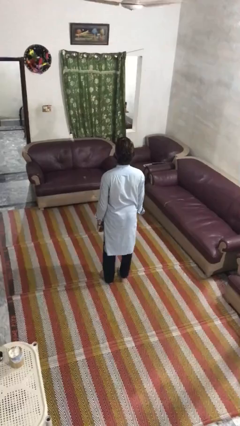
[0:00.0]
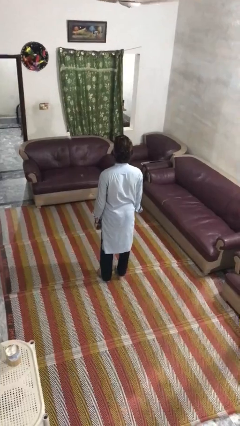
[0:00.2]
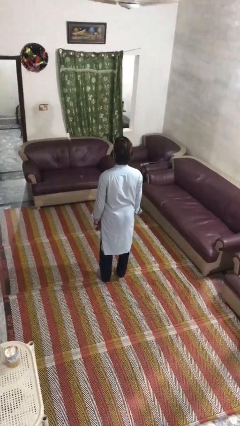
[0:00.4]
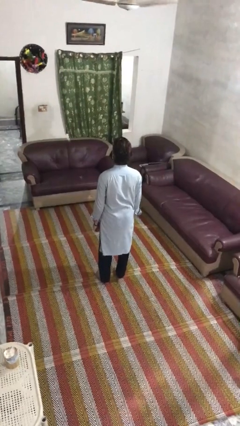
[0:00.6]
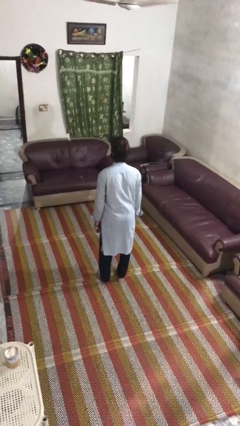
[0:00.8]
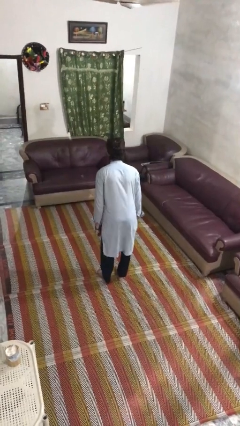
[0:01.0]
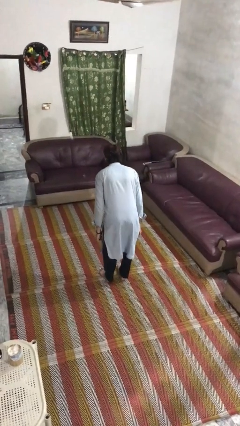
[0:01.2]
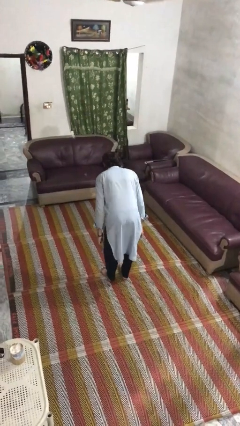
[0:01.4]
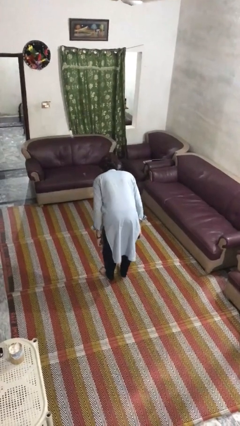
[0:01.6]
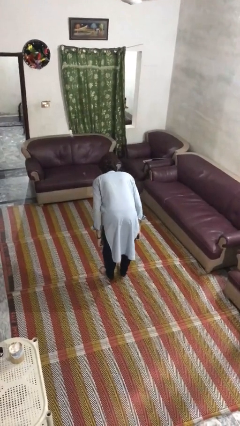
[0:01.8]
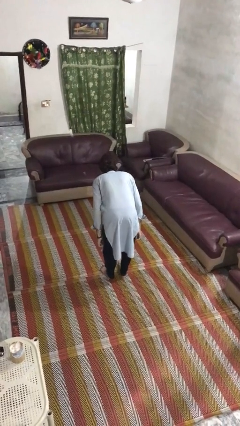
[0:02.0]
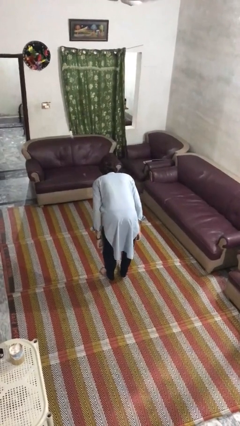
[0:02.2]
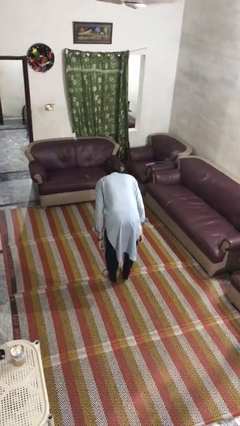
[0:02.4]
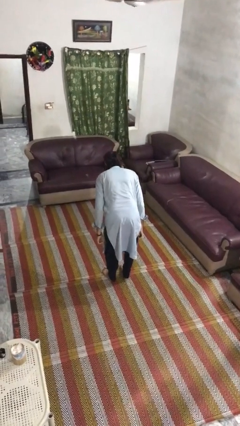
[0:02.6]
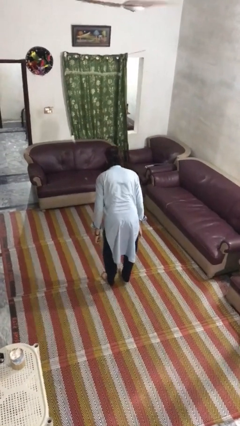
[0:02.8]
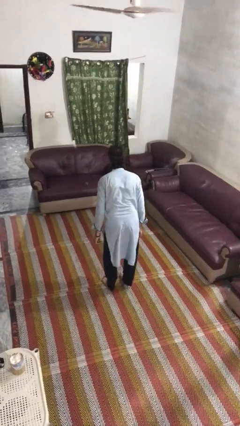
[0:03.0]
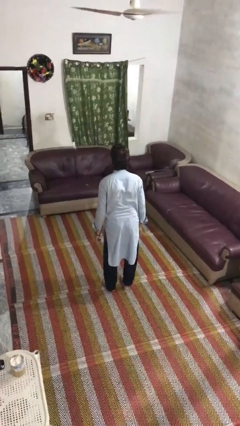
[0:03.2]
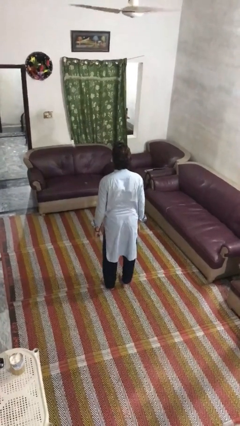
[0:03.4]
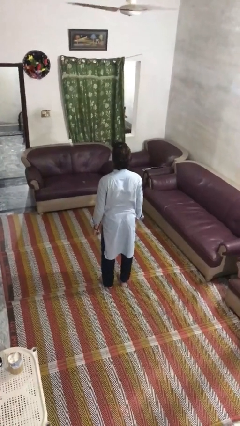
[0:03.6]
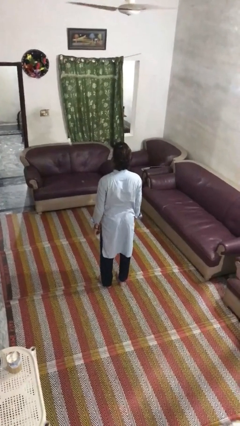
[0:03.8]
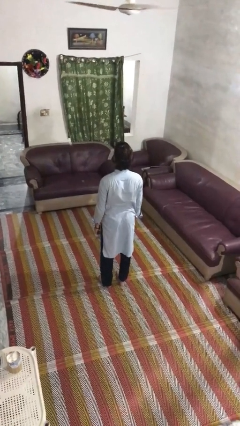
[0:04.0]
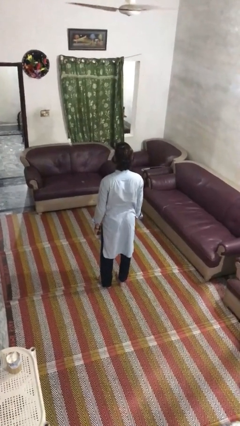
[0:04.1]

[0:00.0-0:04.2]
person bows

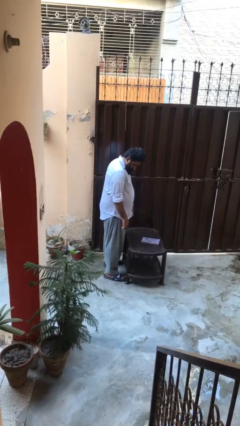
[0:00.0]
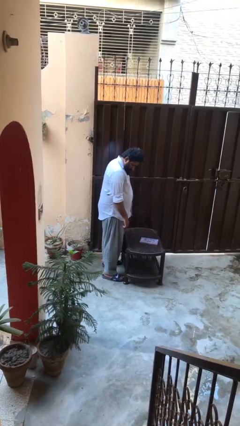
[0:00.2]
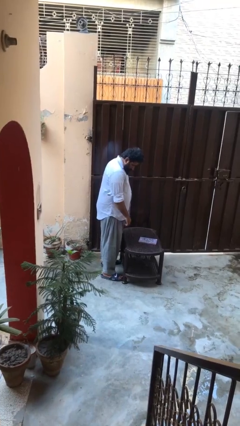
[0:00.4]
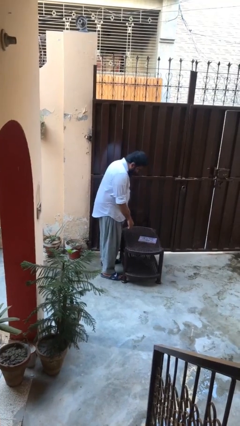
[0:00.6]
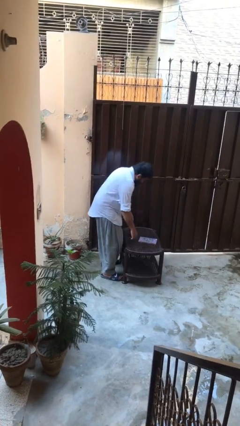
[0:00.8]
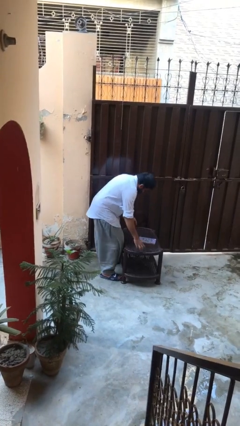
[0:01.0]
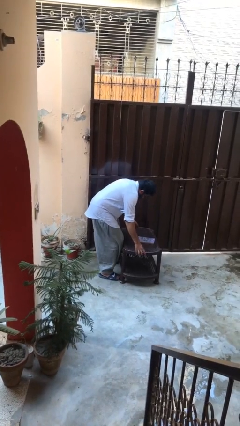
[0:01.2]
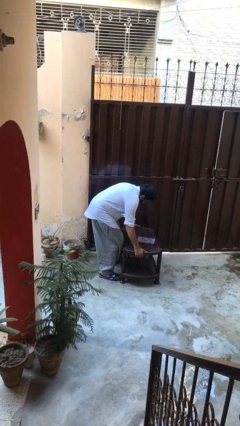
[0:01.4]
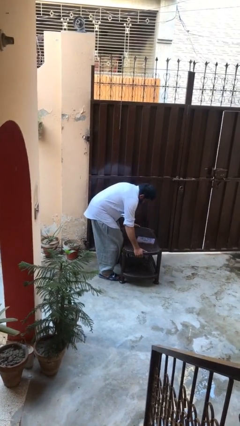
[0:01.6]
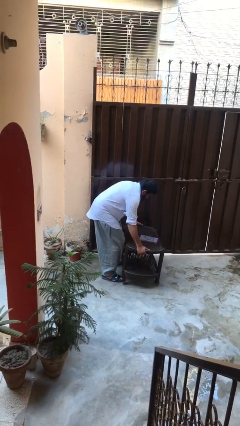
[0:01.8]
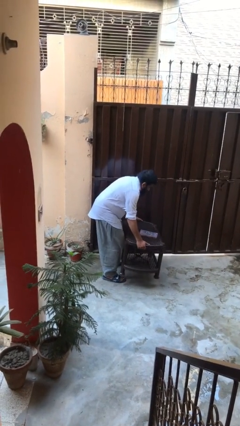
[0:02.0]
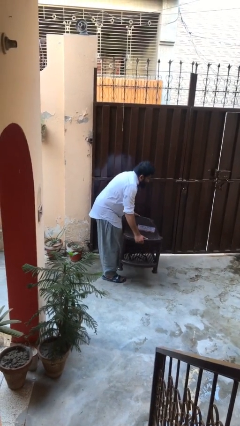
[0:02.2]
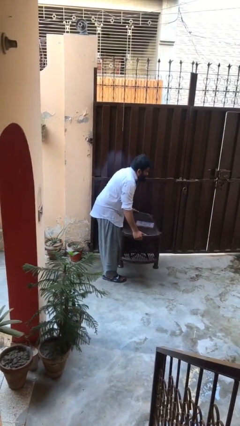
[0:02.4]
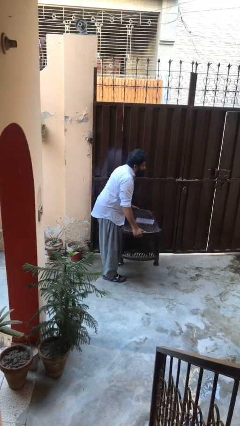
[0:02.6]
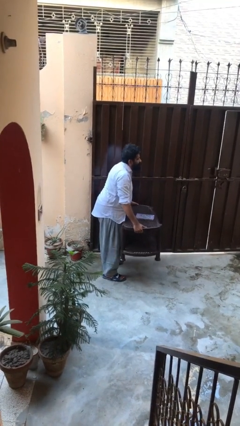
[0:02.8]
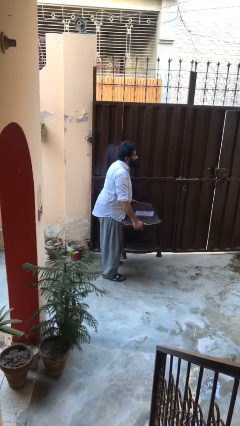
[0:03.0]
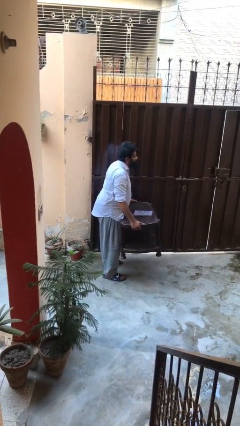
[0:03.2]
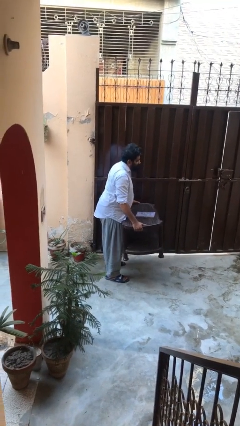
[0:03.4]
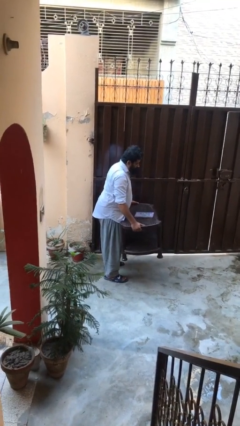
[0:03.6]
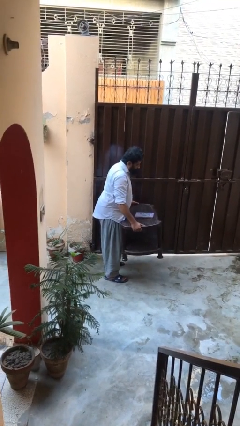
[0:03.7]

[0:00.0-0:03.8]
person picks up object from floor

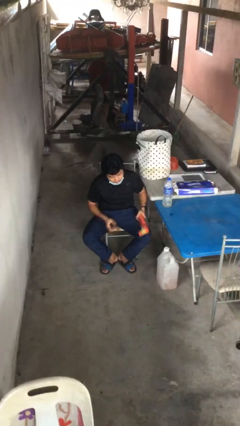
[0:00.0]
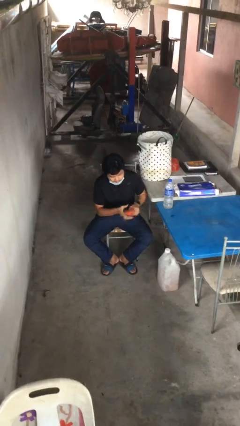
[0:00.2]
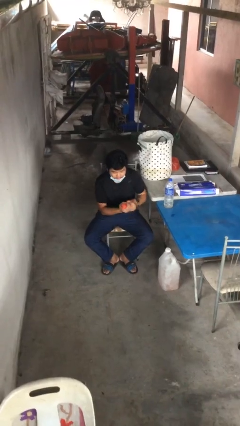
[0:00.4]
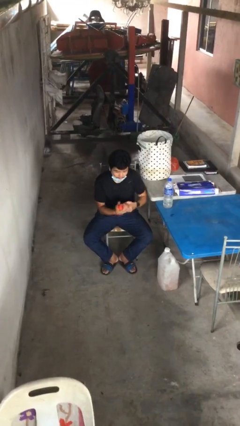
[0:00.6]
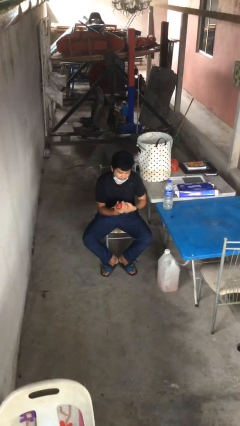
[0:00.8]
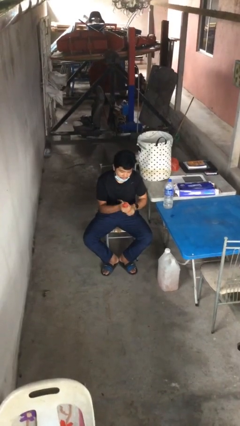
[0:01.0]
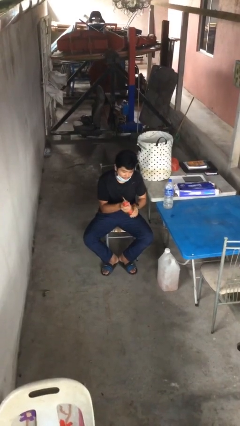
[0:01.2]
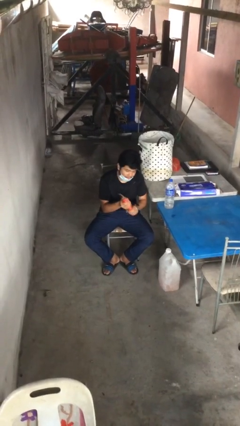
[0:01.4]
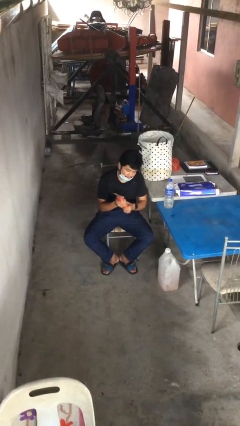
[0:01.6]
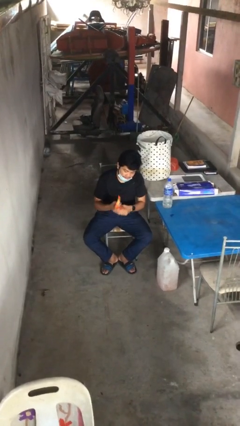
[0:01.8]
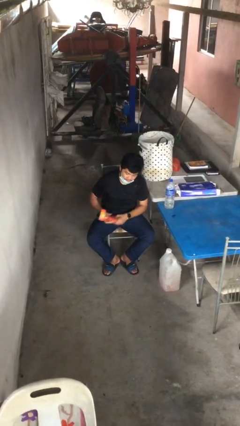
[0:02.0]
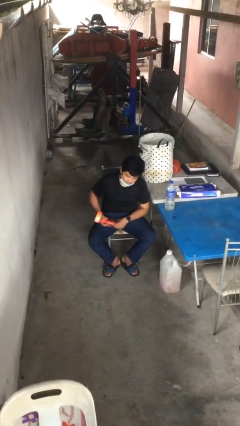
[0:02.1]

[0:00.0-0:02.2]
person squeezes object

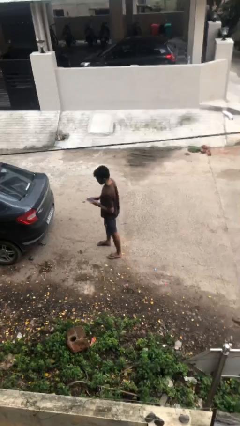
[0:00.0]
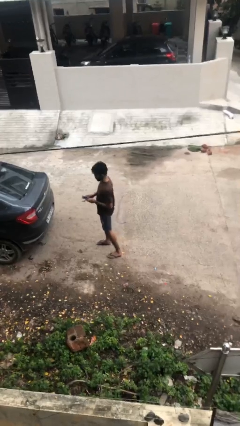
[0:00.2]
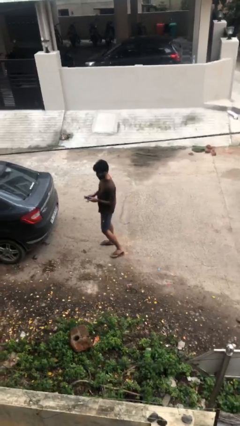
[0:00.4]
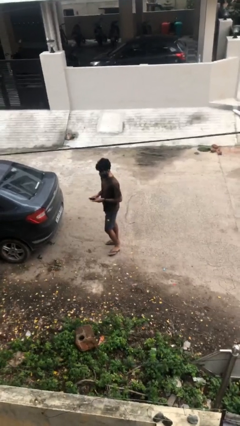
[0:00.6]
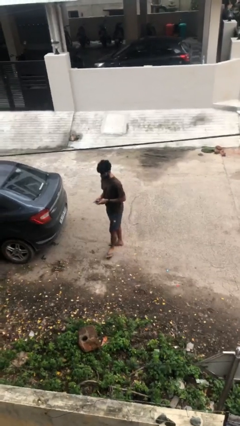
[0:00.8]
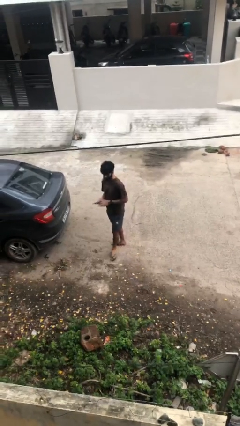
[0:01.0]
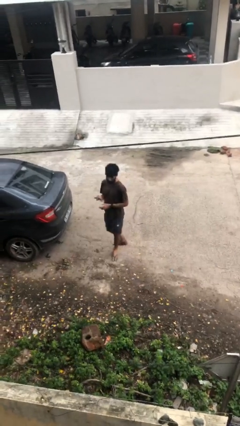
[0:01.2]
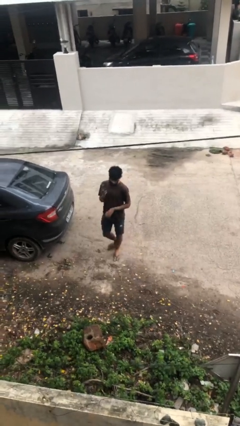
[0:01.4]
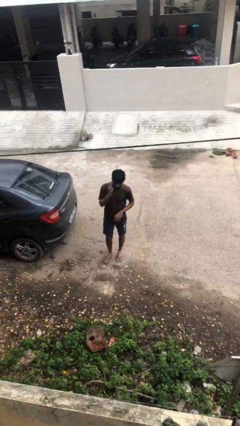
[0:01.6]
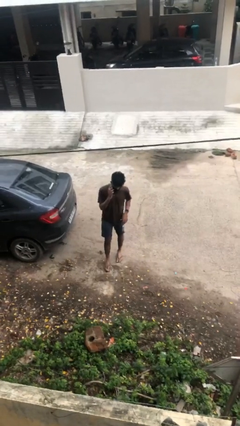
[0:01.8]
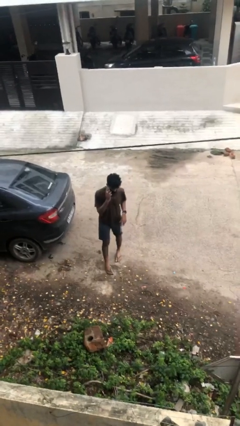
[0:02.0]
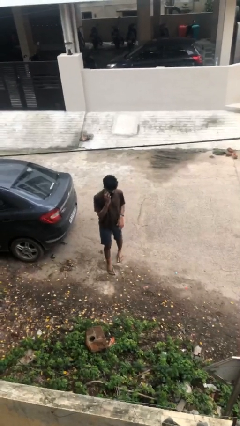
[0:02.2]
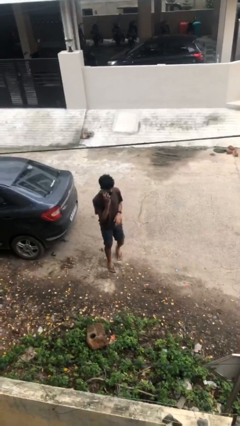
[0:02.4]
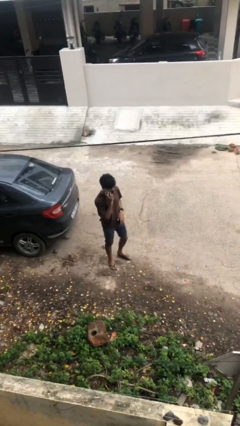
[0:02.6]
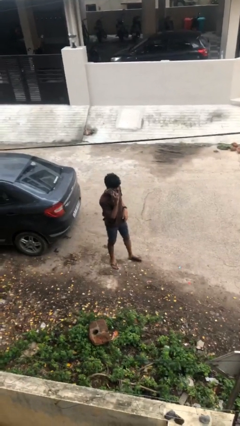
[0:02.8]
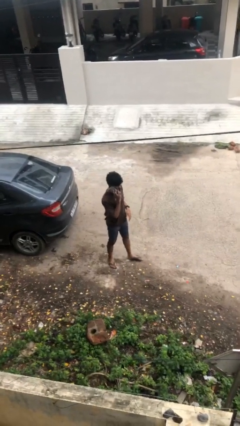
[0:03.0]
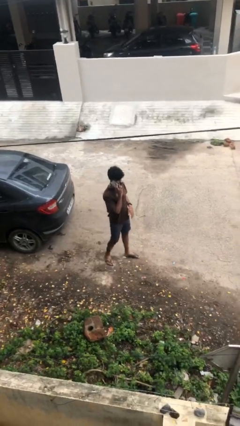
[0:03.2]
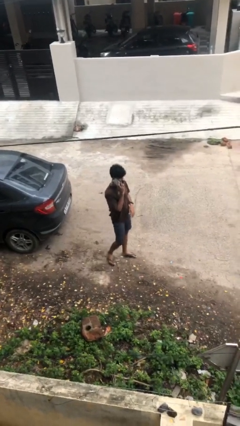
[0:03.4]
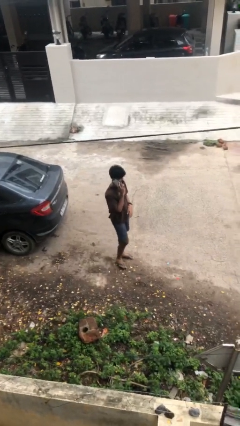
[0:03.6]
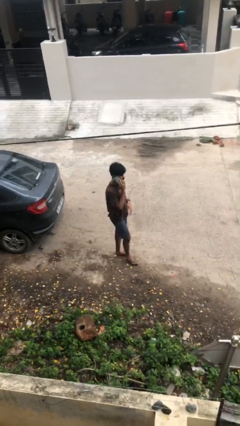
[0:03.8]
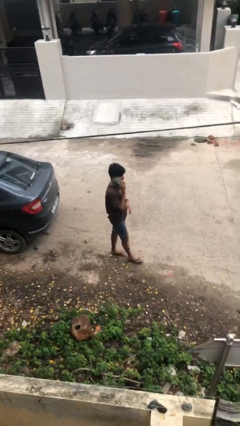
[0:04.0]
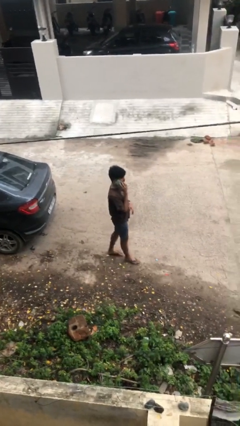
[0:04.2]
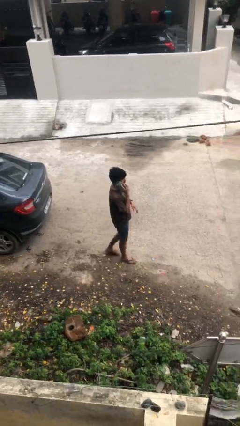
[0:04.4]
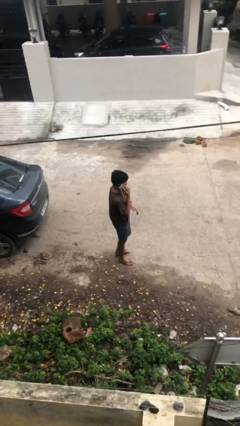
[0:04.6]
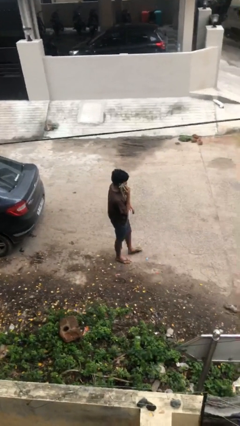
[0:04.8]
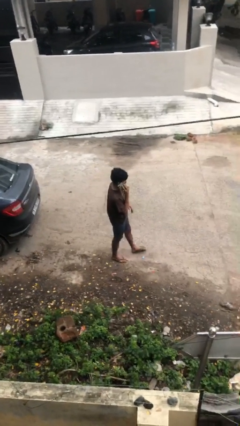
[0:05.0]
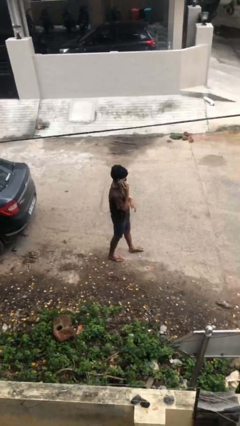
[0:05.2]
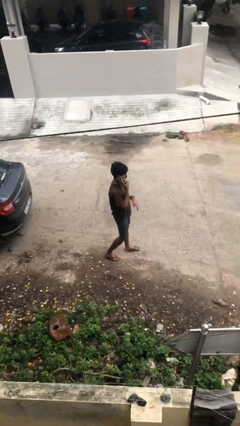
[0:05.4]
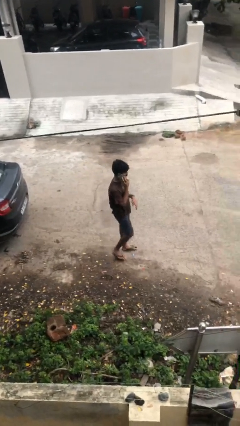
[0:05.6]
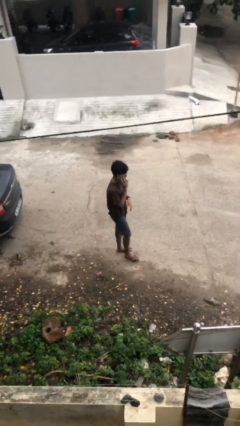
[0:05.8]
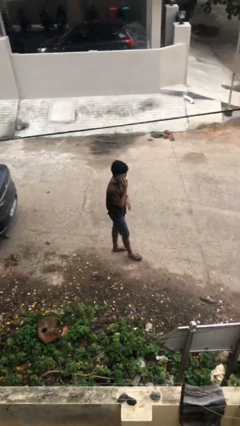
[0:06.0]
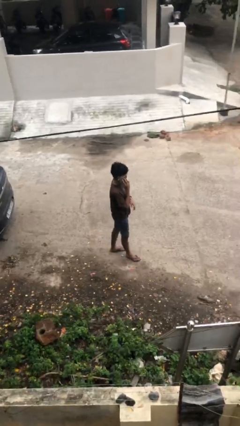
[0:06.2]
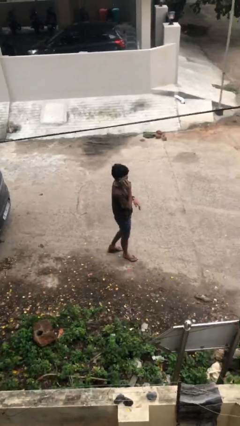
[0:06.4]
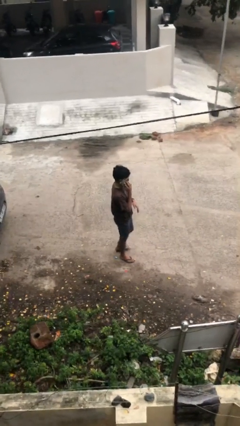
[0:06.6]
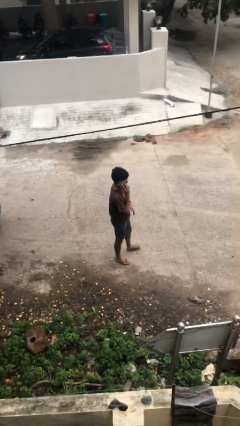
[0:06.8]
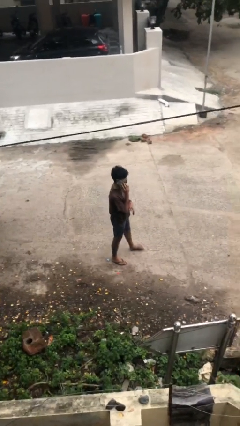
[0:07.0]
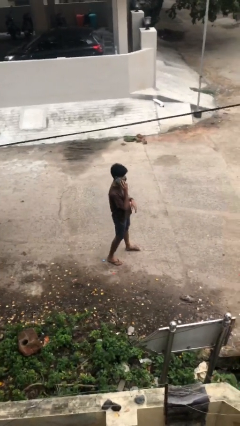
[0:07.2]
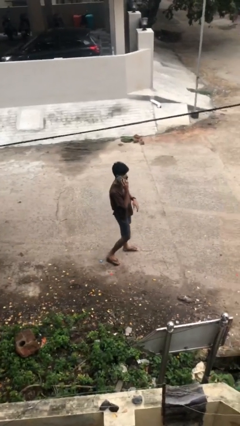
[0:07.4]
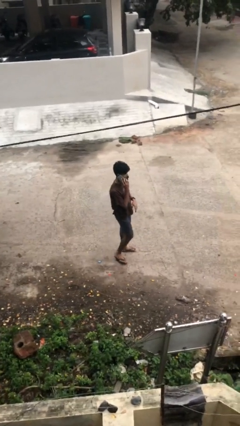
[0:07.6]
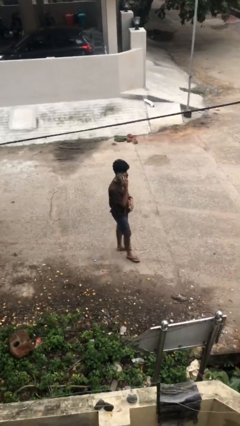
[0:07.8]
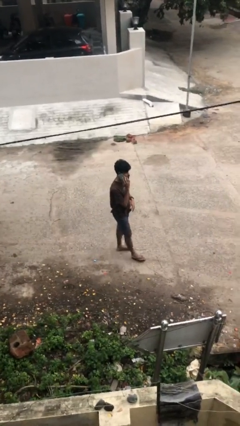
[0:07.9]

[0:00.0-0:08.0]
person talks on phone

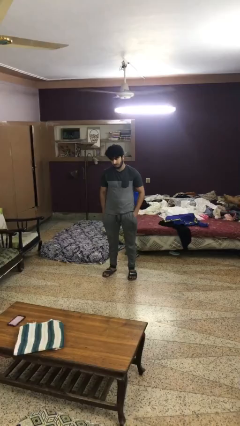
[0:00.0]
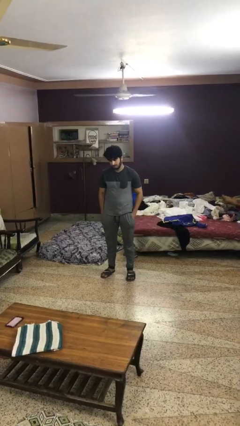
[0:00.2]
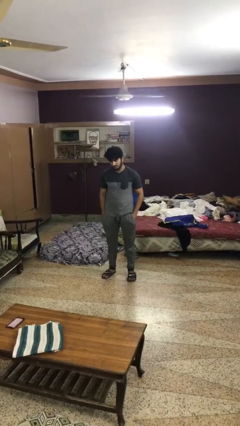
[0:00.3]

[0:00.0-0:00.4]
person puts hands in back pockets
